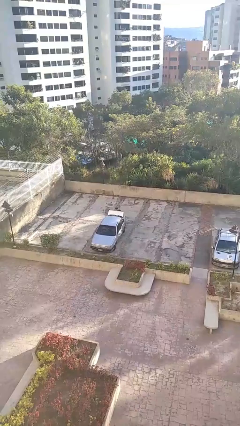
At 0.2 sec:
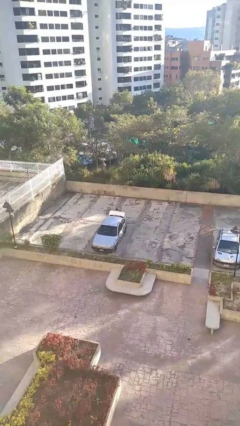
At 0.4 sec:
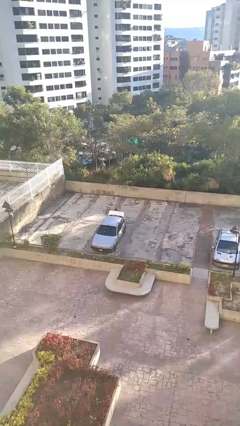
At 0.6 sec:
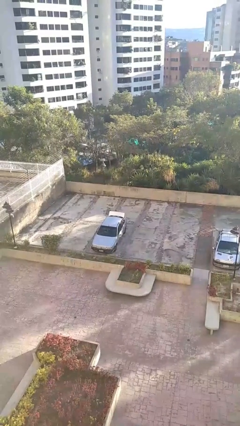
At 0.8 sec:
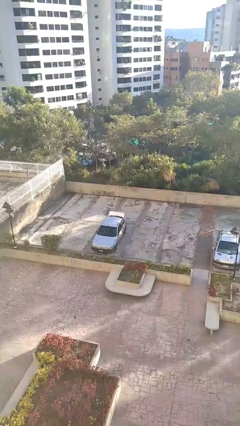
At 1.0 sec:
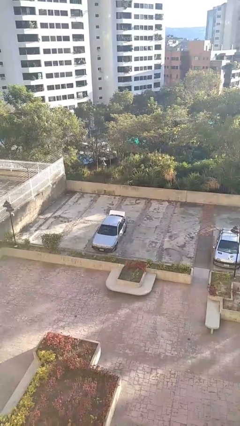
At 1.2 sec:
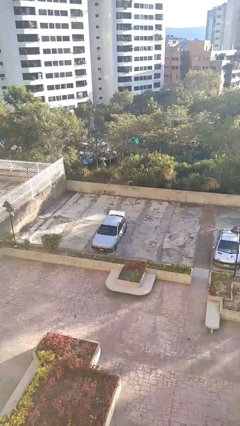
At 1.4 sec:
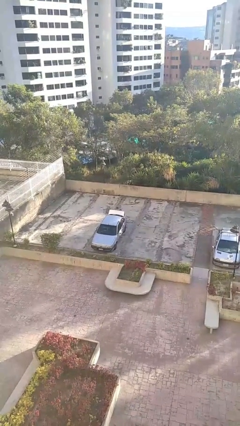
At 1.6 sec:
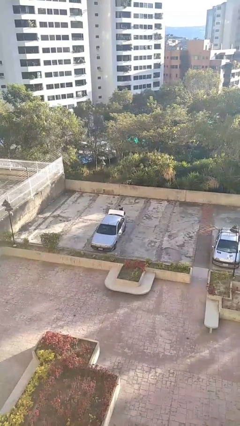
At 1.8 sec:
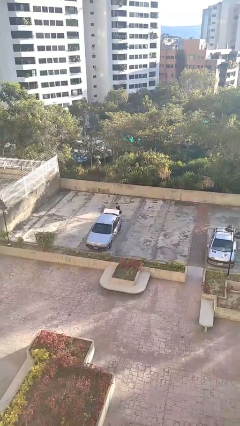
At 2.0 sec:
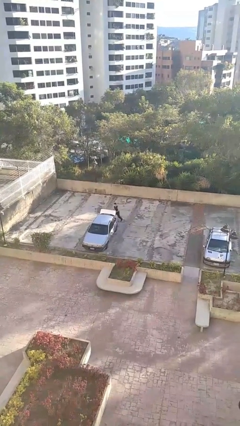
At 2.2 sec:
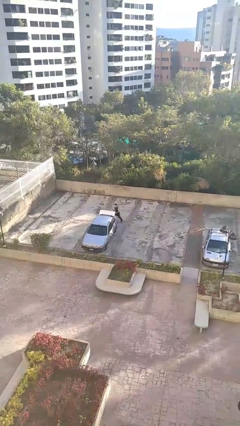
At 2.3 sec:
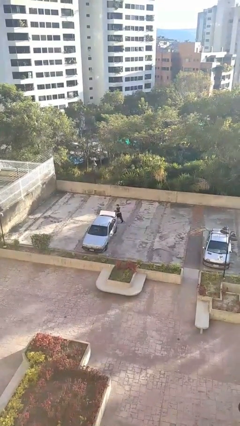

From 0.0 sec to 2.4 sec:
person unloads car

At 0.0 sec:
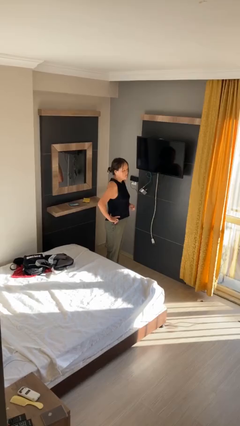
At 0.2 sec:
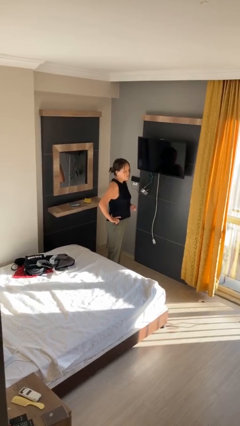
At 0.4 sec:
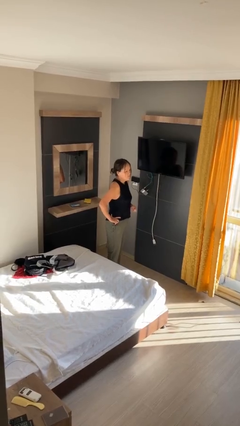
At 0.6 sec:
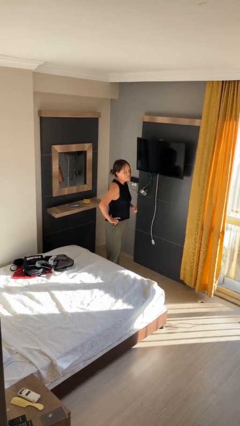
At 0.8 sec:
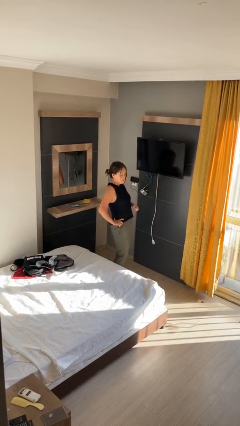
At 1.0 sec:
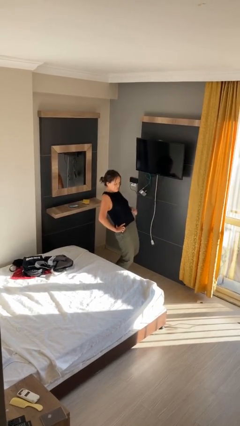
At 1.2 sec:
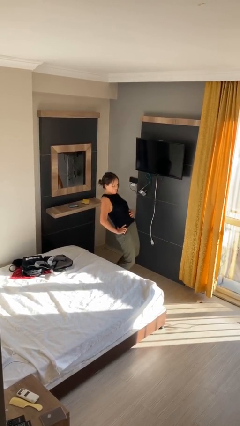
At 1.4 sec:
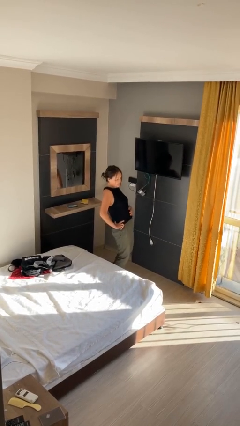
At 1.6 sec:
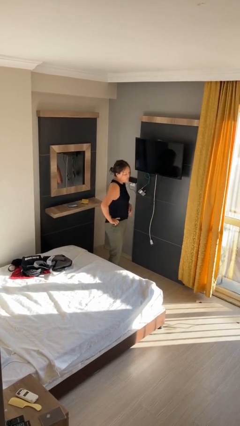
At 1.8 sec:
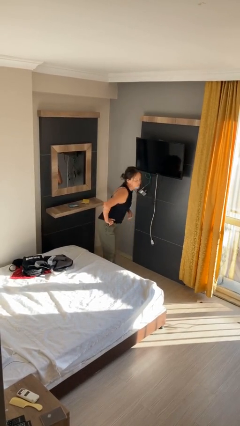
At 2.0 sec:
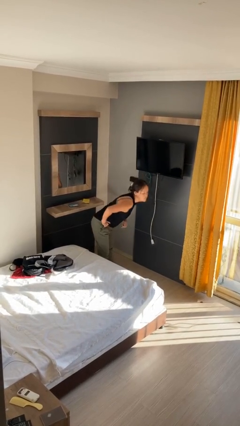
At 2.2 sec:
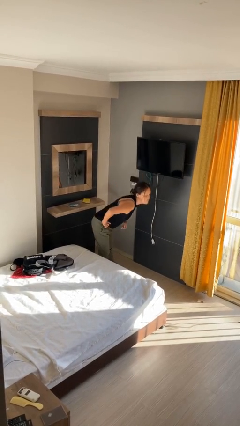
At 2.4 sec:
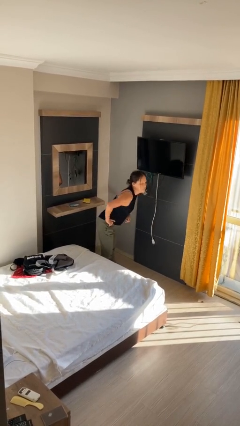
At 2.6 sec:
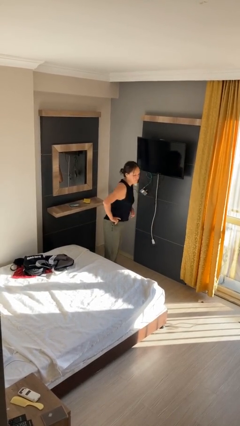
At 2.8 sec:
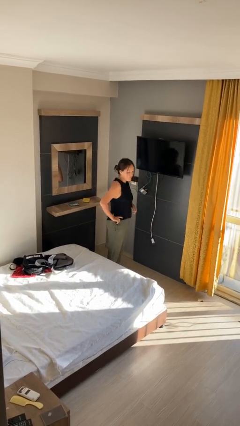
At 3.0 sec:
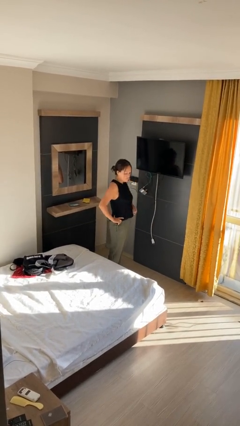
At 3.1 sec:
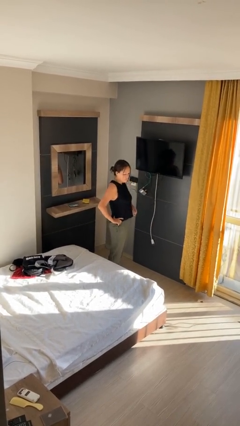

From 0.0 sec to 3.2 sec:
person wiggles hips

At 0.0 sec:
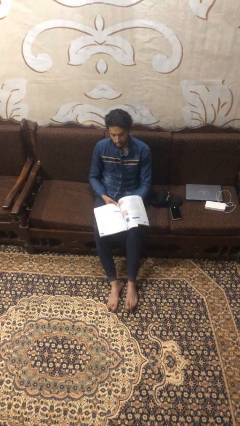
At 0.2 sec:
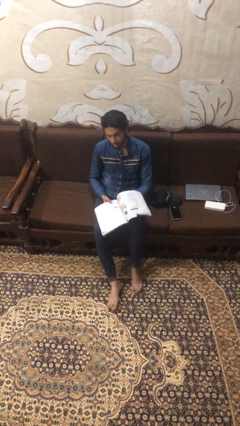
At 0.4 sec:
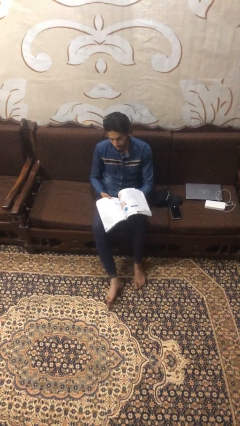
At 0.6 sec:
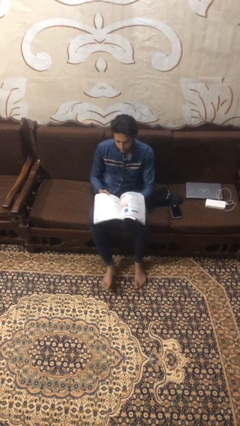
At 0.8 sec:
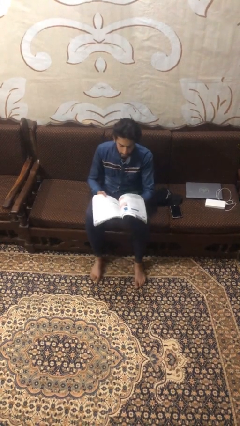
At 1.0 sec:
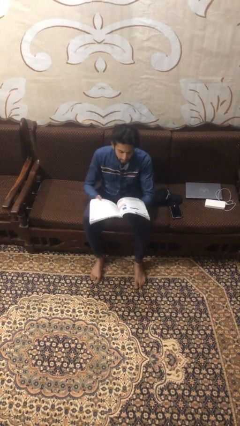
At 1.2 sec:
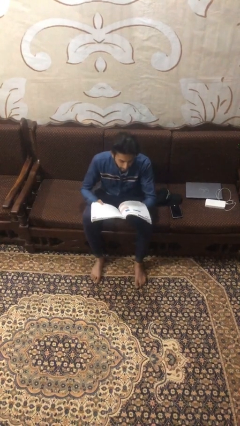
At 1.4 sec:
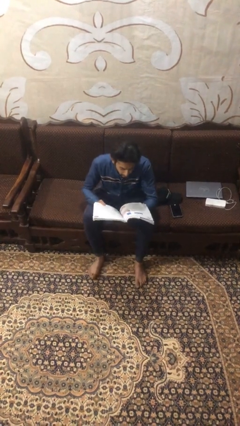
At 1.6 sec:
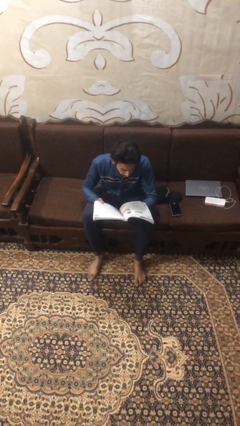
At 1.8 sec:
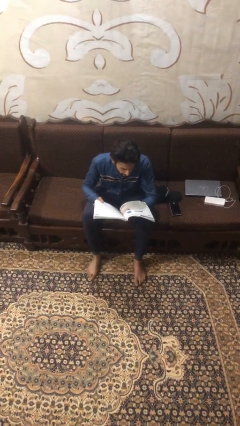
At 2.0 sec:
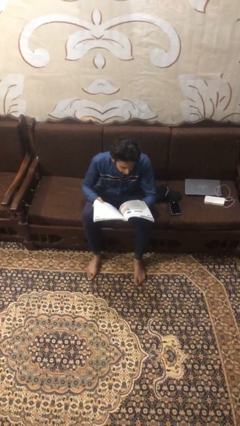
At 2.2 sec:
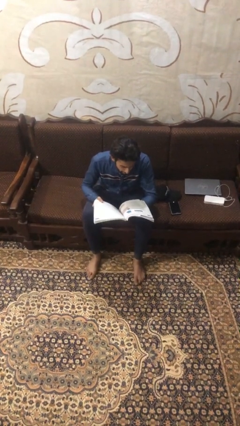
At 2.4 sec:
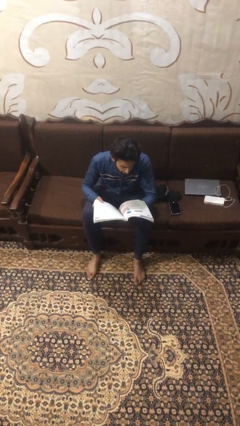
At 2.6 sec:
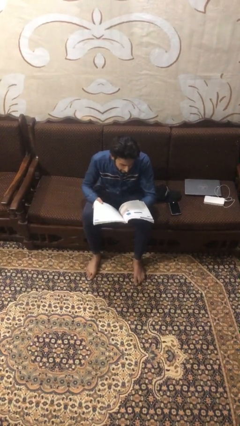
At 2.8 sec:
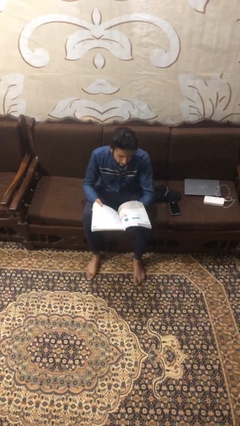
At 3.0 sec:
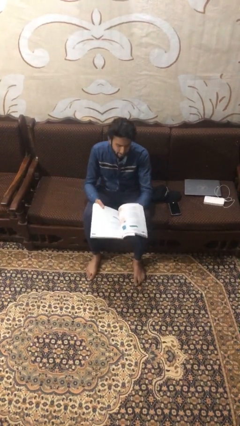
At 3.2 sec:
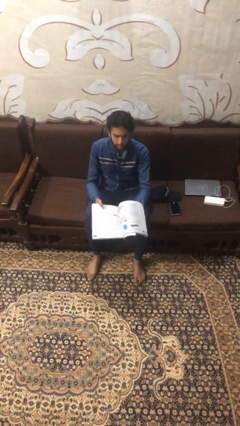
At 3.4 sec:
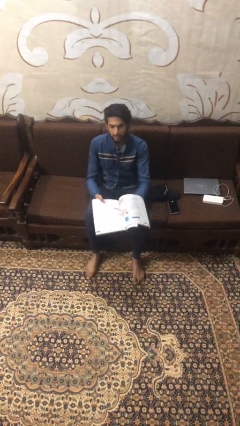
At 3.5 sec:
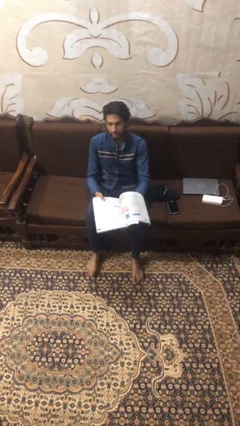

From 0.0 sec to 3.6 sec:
person reads document

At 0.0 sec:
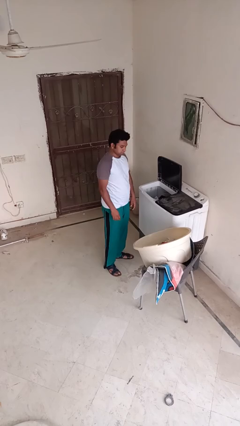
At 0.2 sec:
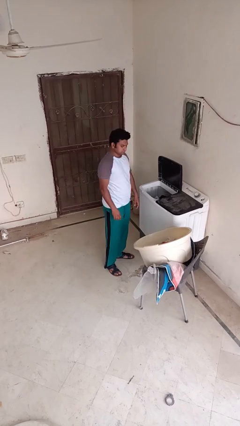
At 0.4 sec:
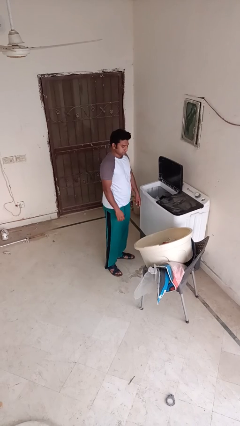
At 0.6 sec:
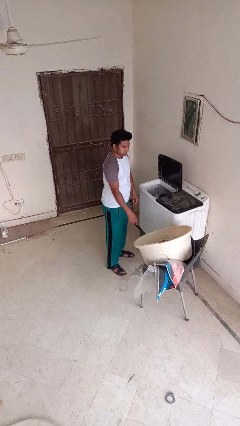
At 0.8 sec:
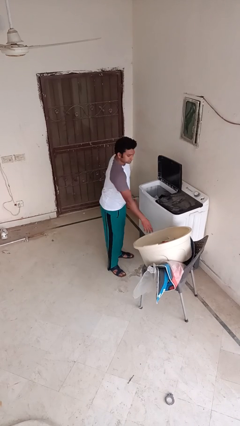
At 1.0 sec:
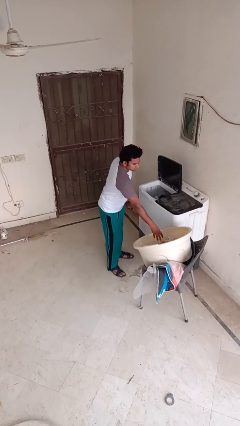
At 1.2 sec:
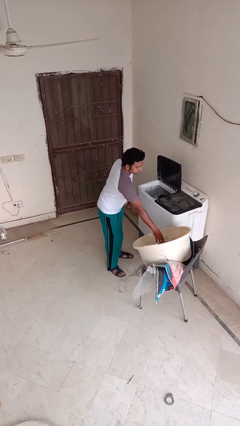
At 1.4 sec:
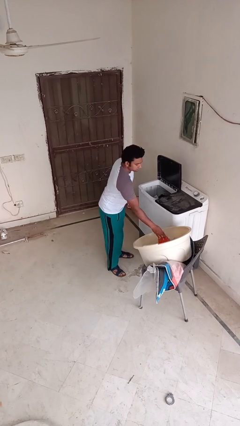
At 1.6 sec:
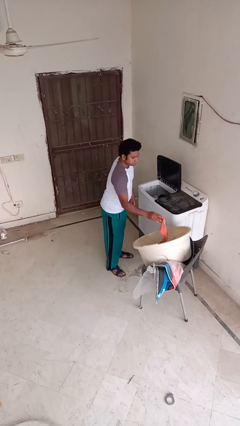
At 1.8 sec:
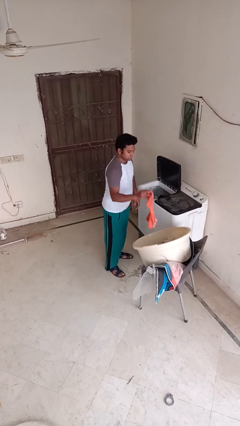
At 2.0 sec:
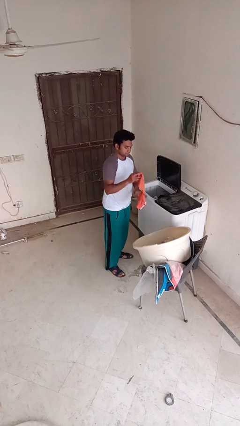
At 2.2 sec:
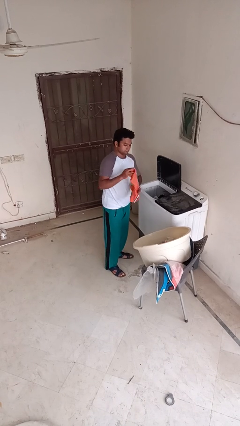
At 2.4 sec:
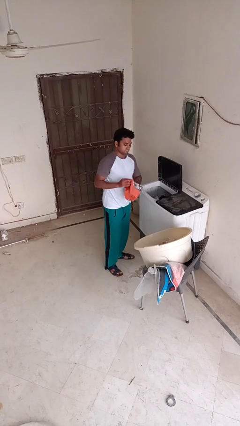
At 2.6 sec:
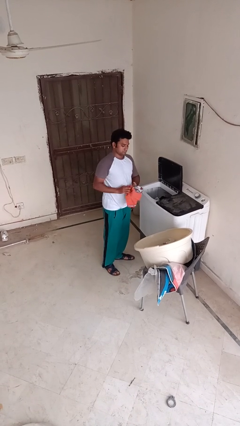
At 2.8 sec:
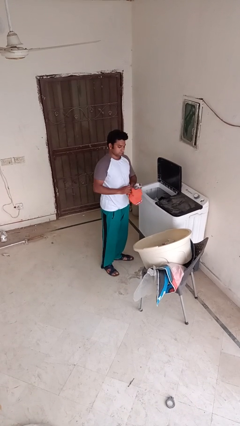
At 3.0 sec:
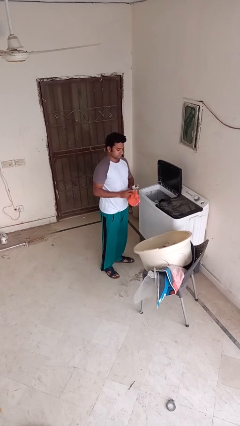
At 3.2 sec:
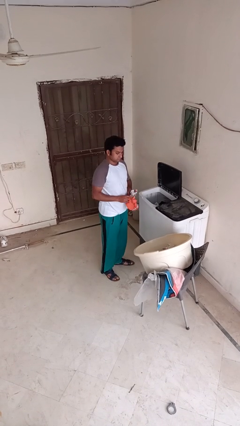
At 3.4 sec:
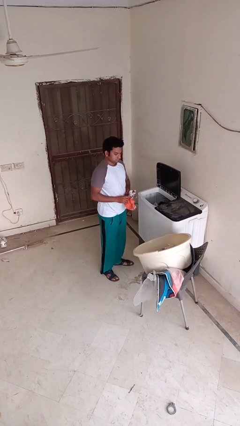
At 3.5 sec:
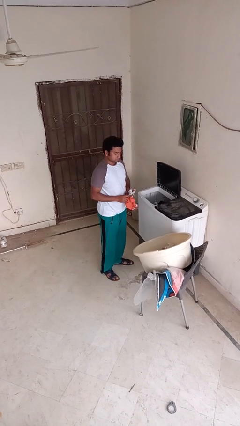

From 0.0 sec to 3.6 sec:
person unloads clotheswasher

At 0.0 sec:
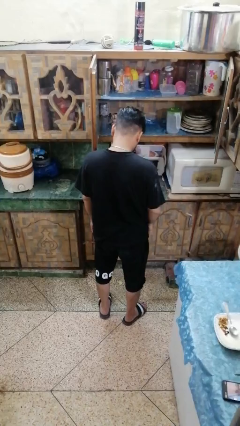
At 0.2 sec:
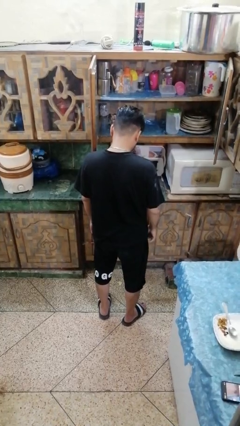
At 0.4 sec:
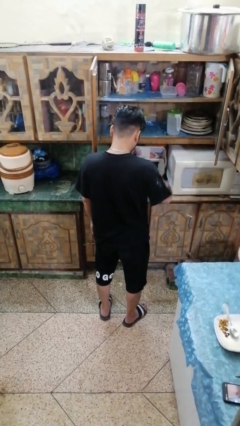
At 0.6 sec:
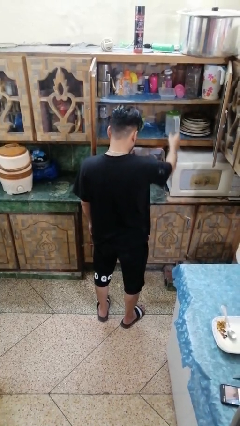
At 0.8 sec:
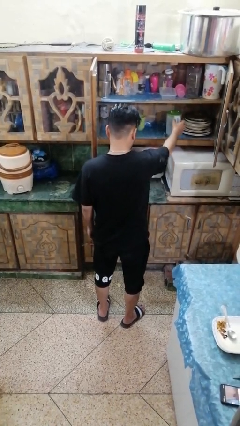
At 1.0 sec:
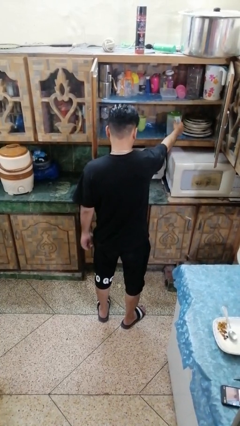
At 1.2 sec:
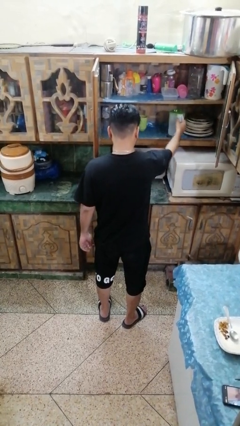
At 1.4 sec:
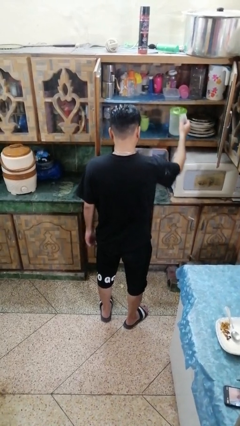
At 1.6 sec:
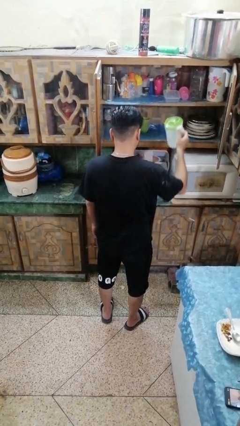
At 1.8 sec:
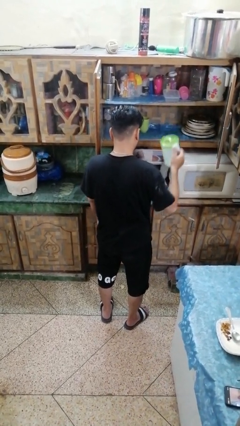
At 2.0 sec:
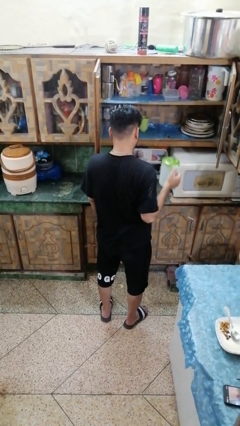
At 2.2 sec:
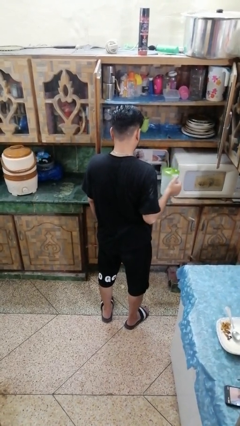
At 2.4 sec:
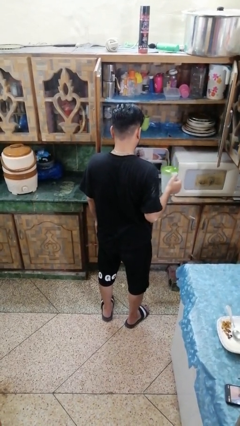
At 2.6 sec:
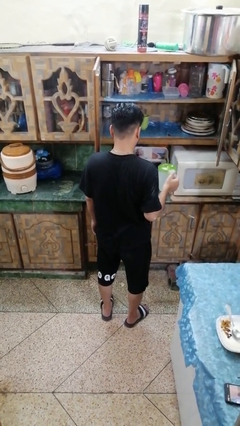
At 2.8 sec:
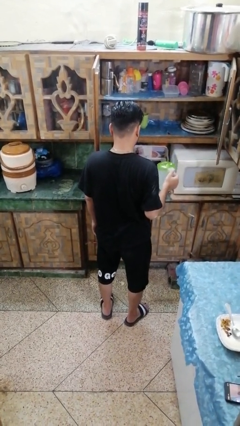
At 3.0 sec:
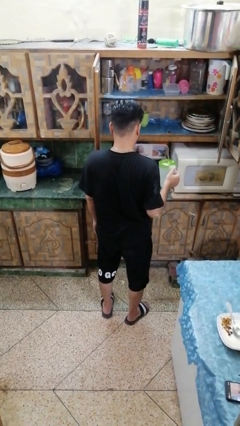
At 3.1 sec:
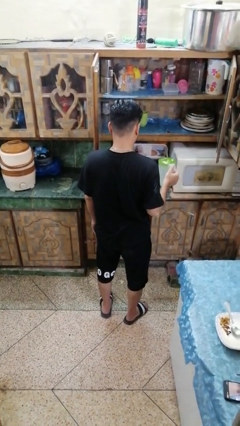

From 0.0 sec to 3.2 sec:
person picks up object from cabinet

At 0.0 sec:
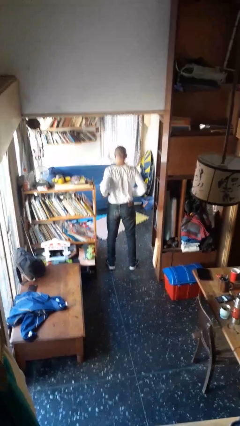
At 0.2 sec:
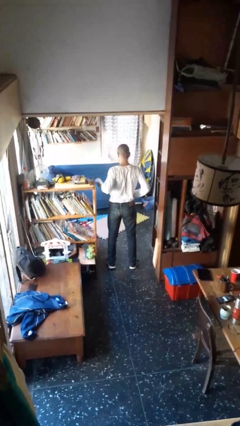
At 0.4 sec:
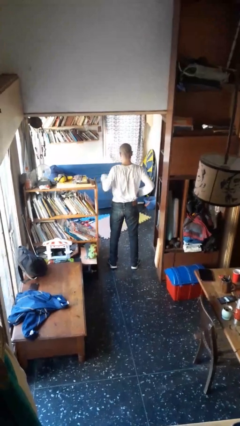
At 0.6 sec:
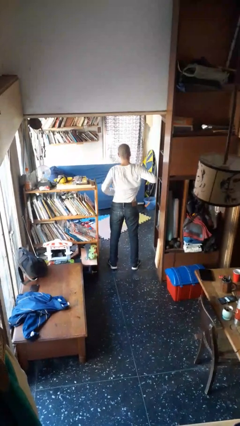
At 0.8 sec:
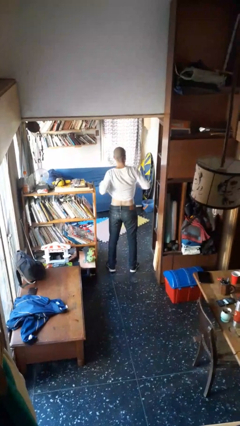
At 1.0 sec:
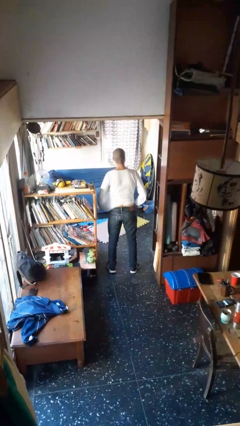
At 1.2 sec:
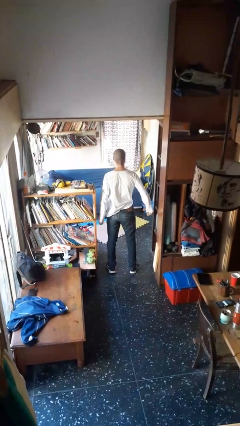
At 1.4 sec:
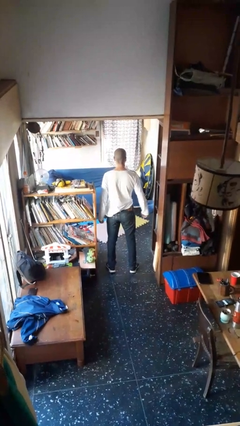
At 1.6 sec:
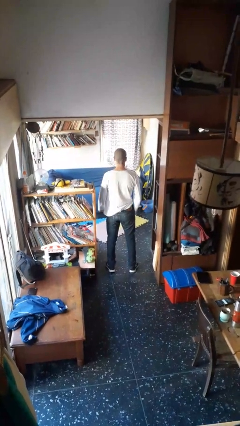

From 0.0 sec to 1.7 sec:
person untucks shirt
